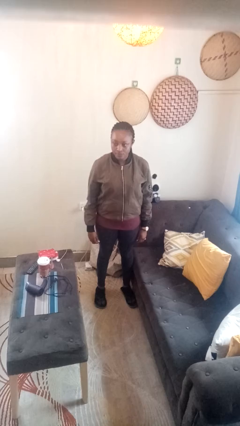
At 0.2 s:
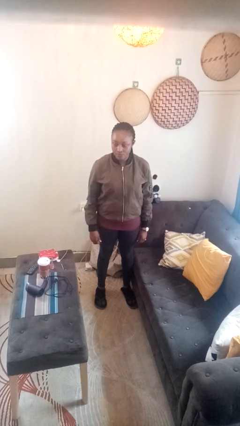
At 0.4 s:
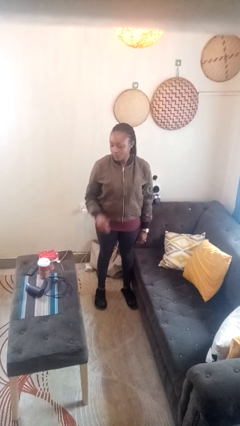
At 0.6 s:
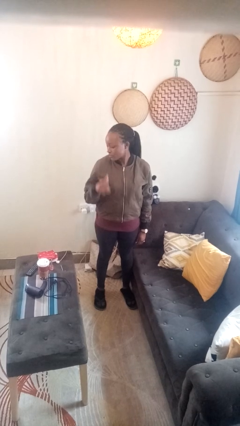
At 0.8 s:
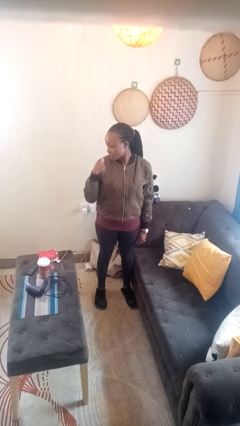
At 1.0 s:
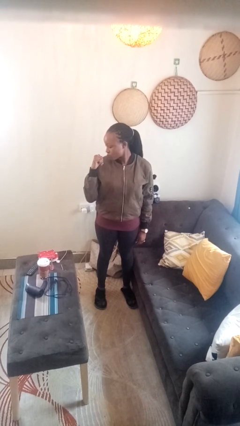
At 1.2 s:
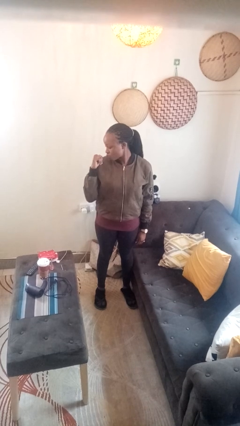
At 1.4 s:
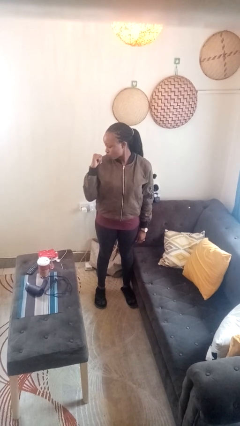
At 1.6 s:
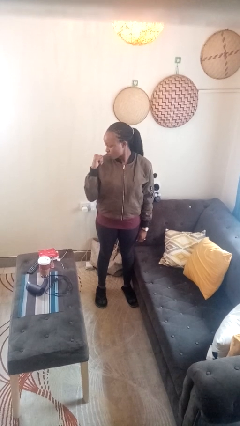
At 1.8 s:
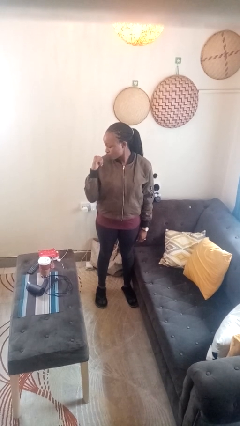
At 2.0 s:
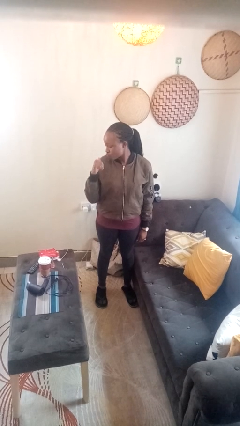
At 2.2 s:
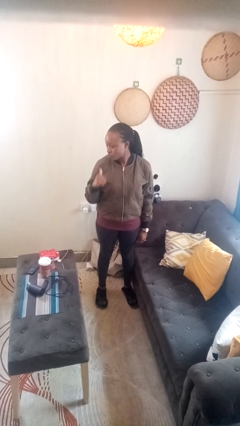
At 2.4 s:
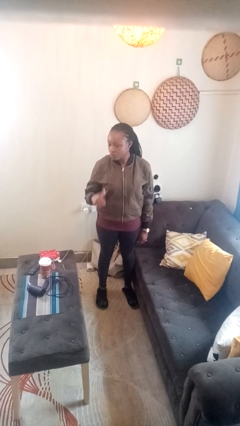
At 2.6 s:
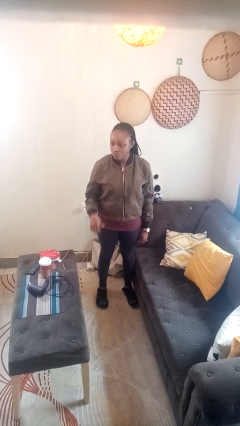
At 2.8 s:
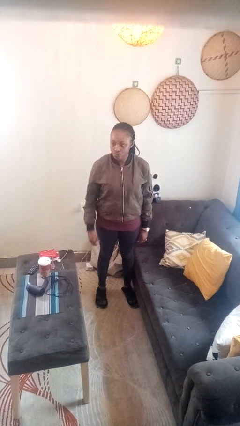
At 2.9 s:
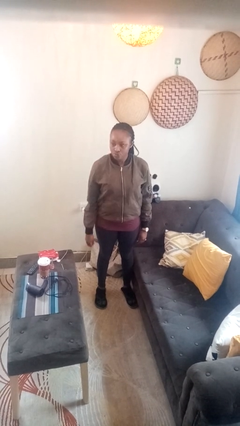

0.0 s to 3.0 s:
person gestures behind me

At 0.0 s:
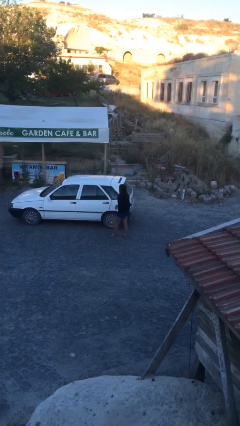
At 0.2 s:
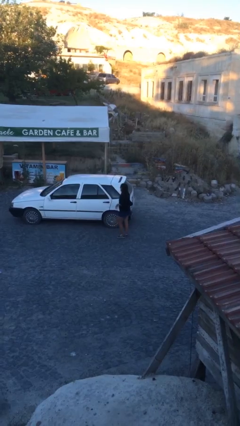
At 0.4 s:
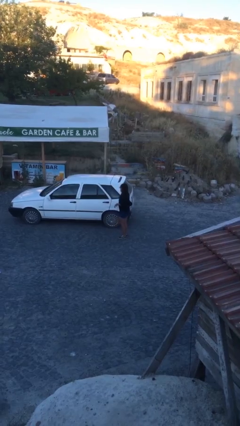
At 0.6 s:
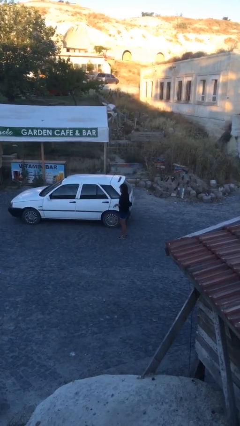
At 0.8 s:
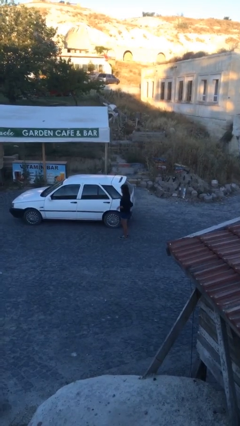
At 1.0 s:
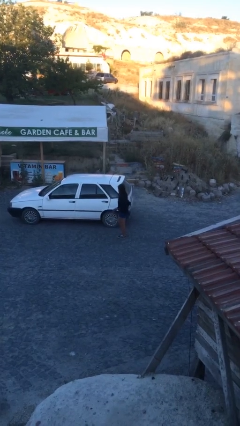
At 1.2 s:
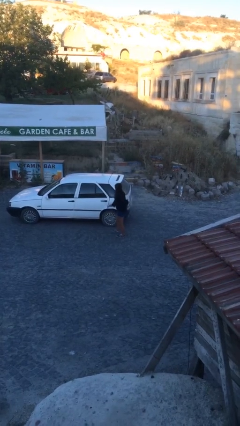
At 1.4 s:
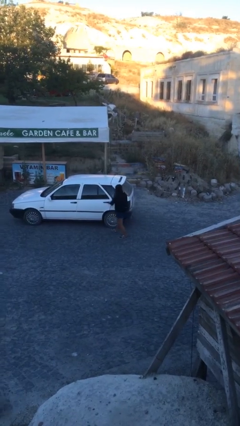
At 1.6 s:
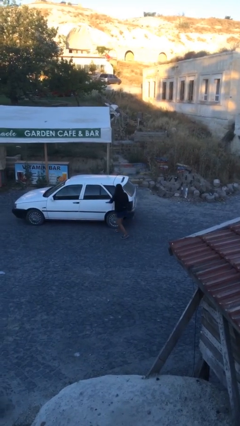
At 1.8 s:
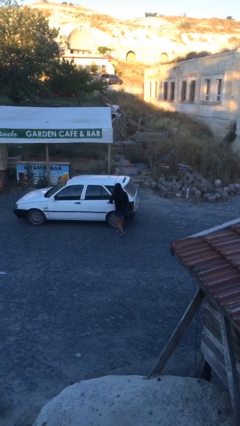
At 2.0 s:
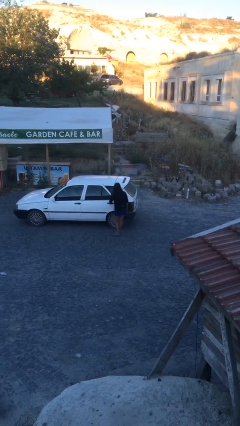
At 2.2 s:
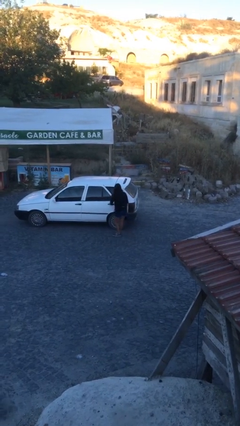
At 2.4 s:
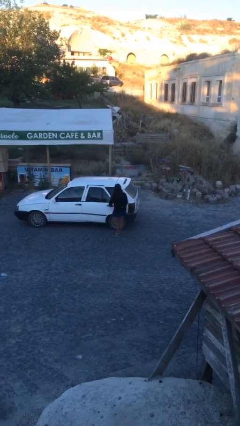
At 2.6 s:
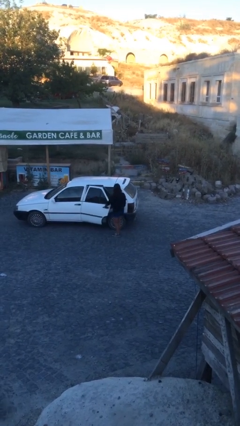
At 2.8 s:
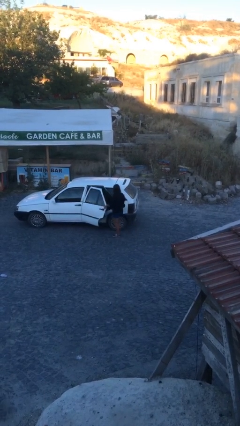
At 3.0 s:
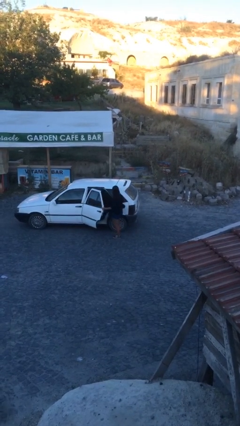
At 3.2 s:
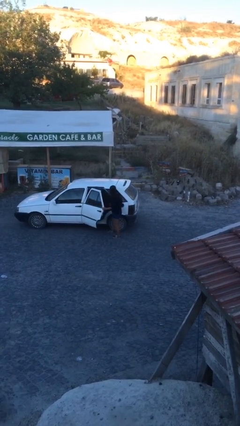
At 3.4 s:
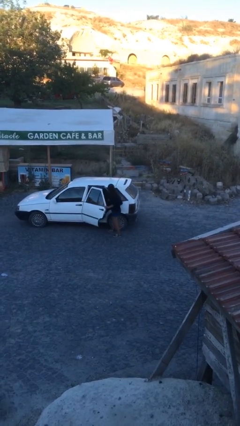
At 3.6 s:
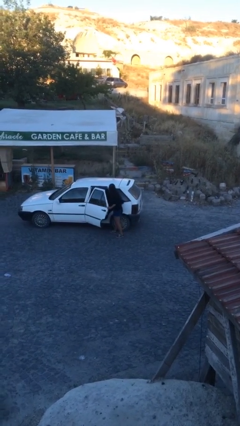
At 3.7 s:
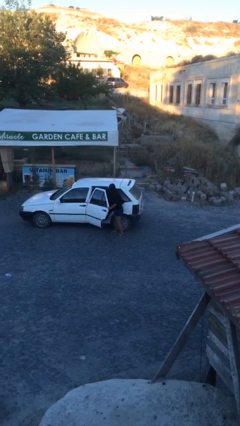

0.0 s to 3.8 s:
person opens car door

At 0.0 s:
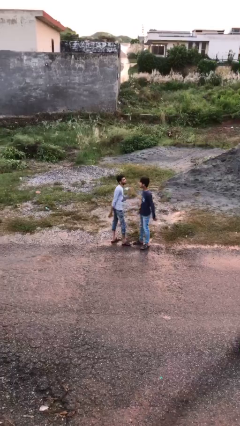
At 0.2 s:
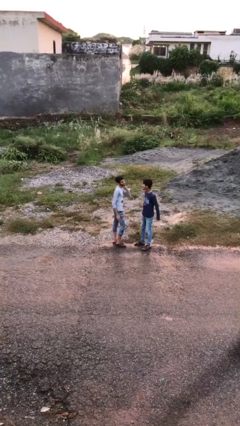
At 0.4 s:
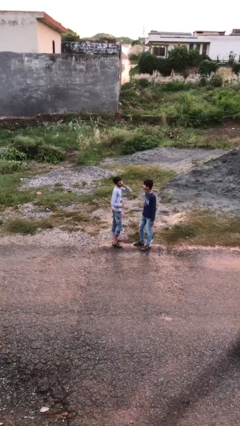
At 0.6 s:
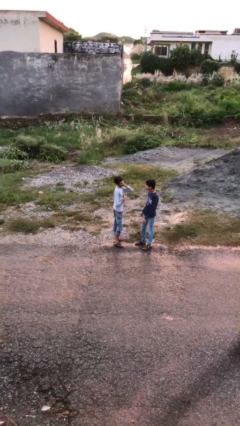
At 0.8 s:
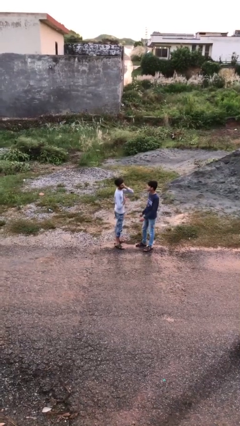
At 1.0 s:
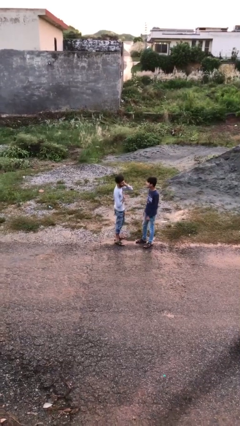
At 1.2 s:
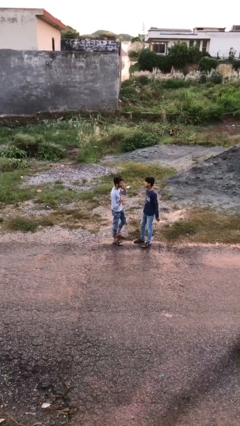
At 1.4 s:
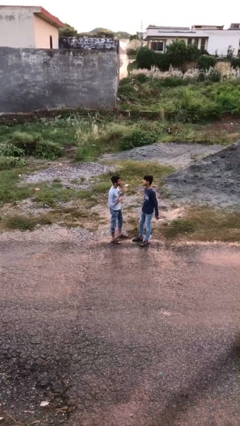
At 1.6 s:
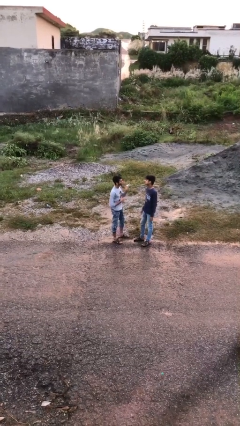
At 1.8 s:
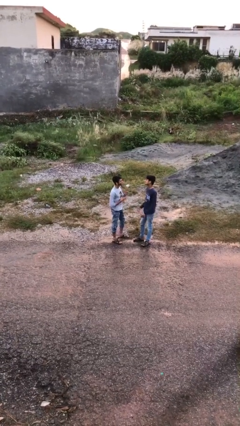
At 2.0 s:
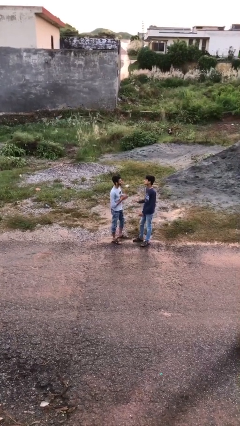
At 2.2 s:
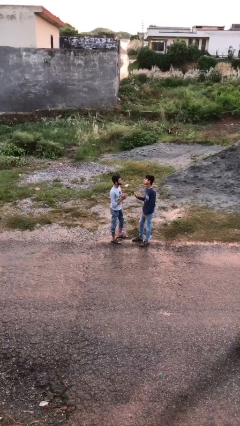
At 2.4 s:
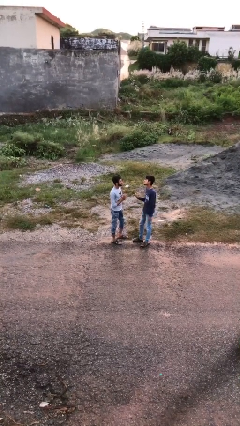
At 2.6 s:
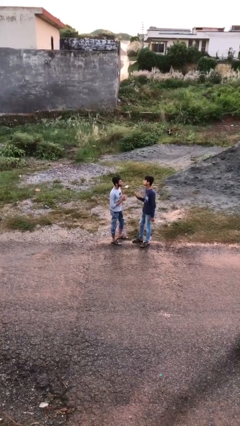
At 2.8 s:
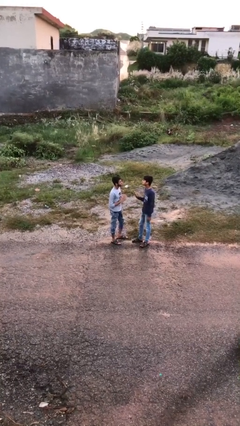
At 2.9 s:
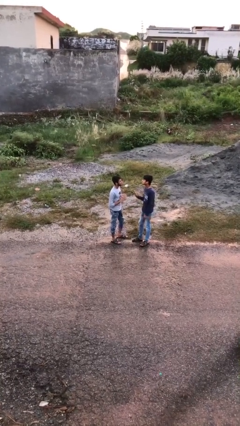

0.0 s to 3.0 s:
person talks to person

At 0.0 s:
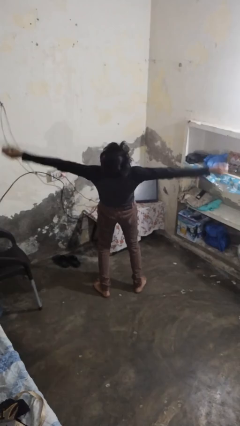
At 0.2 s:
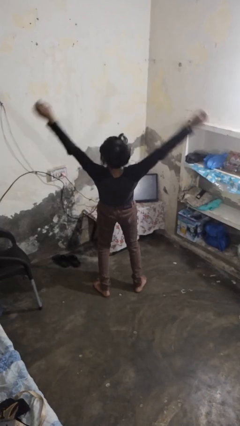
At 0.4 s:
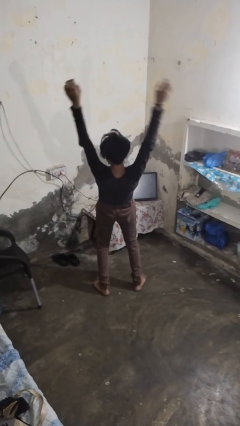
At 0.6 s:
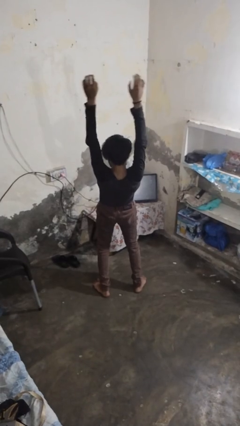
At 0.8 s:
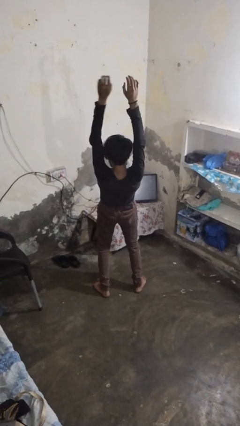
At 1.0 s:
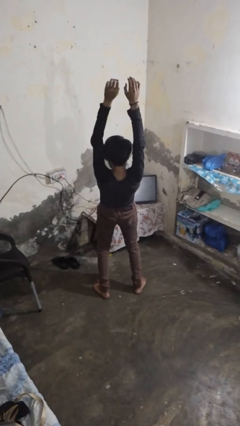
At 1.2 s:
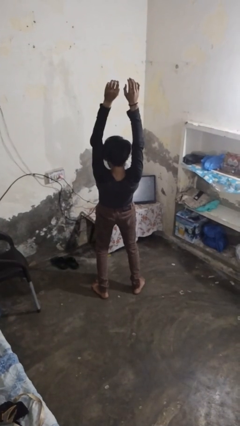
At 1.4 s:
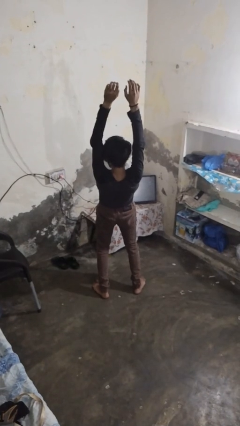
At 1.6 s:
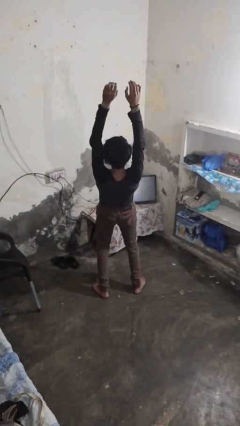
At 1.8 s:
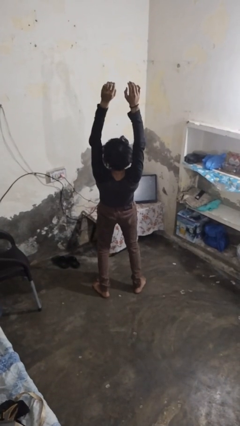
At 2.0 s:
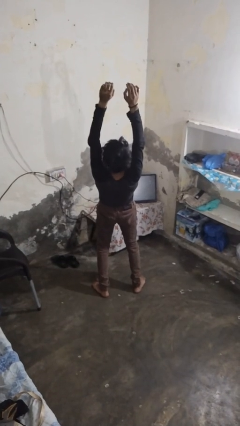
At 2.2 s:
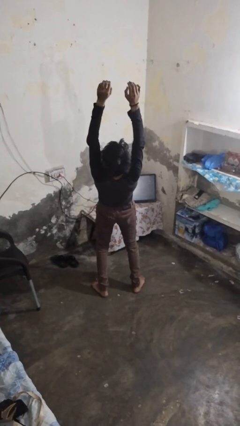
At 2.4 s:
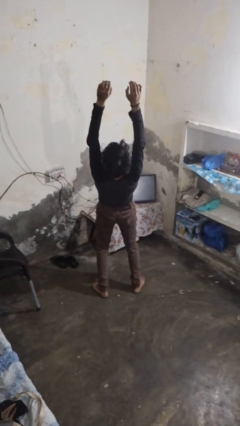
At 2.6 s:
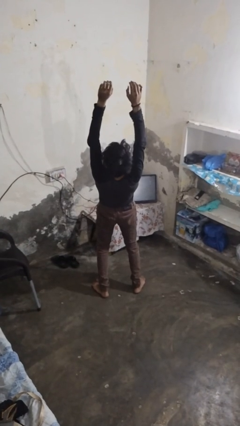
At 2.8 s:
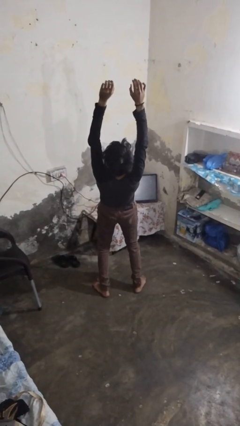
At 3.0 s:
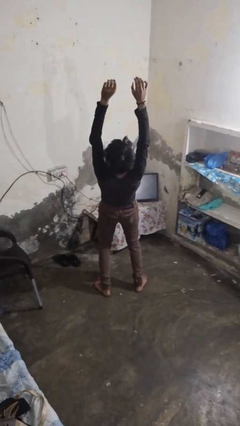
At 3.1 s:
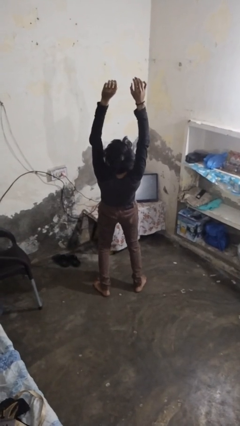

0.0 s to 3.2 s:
person stretches arms over head

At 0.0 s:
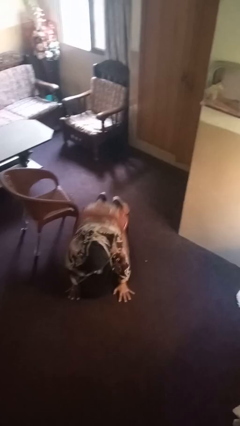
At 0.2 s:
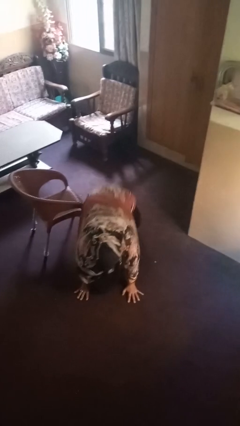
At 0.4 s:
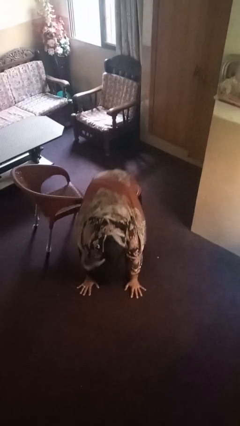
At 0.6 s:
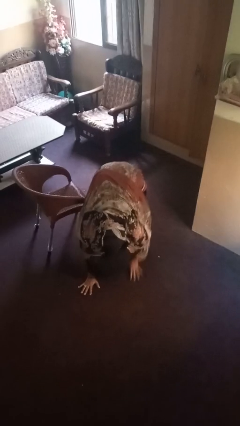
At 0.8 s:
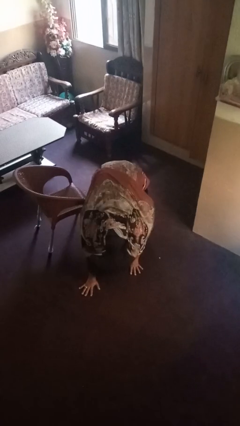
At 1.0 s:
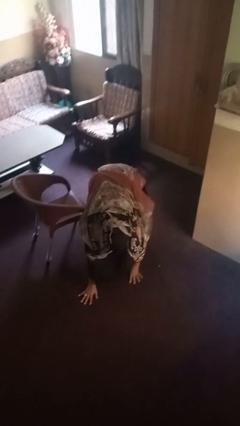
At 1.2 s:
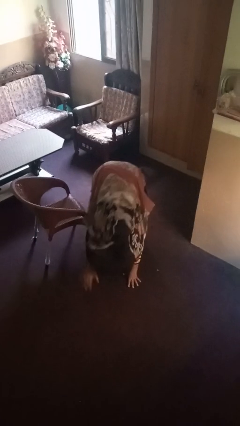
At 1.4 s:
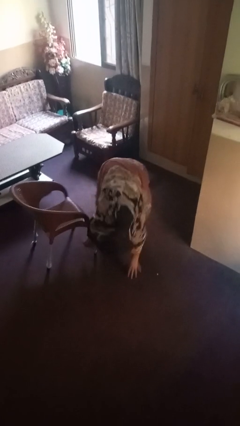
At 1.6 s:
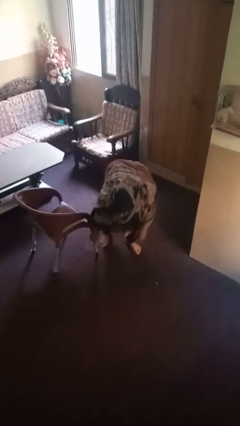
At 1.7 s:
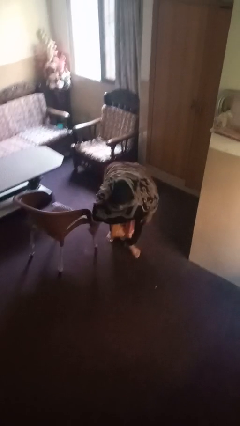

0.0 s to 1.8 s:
person lies down on floor

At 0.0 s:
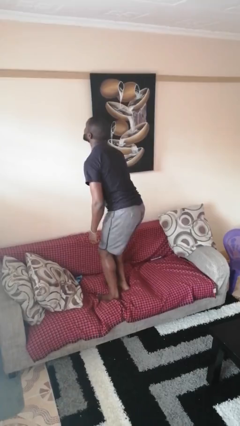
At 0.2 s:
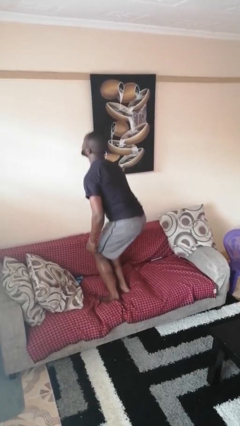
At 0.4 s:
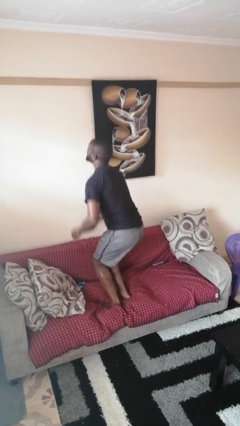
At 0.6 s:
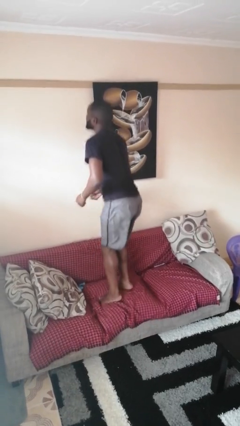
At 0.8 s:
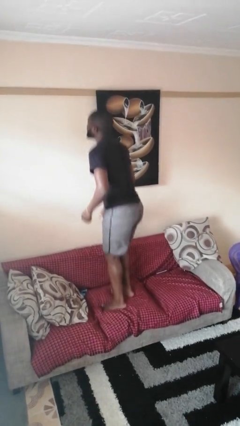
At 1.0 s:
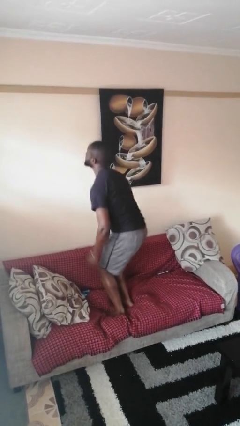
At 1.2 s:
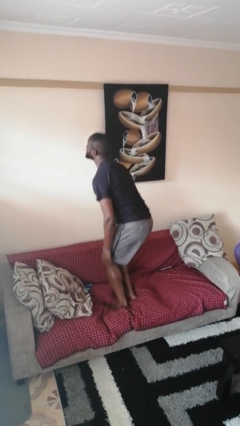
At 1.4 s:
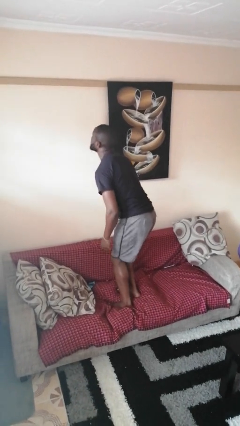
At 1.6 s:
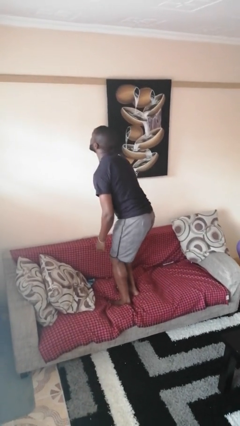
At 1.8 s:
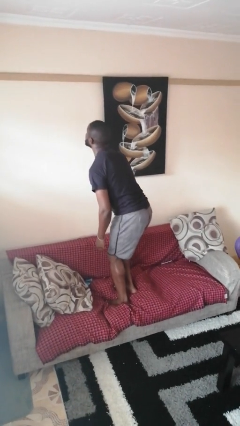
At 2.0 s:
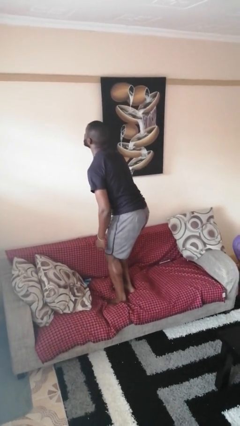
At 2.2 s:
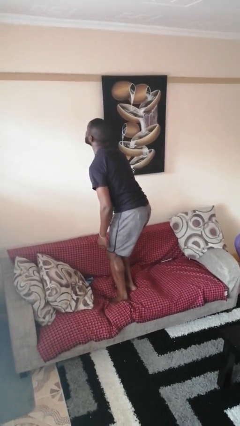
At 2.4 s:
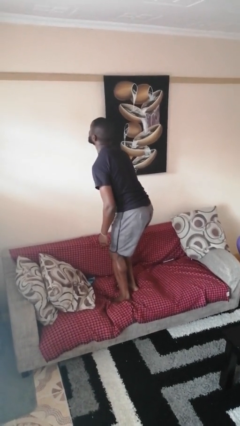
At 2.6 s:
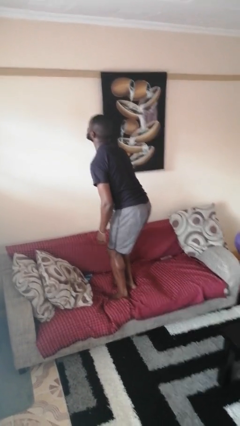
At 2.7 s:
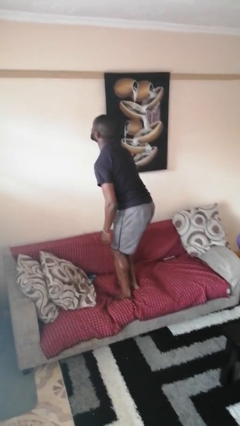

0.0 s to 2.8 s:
person jumps on couch
